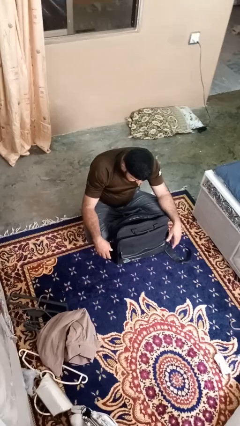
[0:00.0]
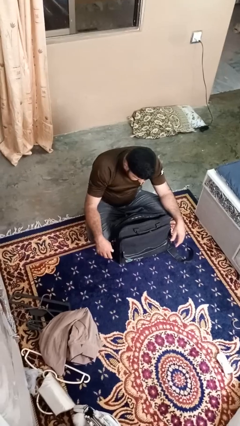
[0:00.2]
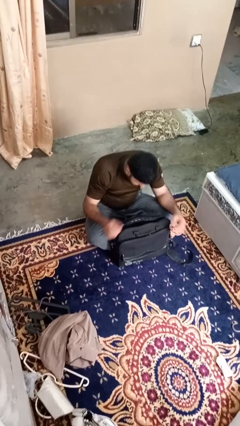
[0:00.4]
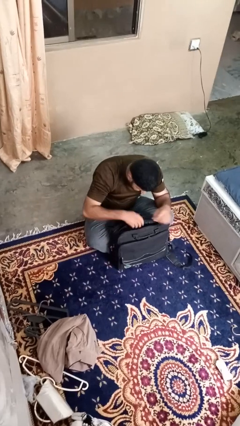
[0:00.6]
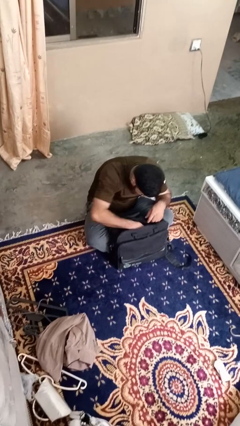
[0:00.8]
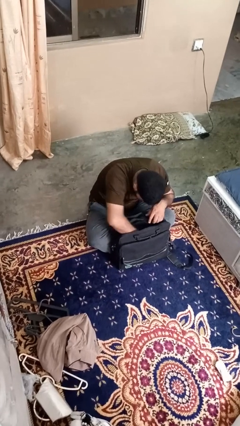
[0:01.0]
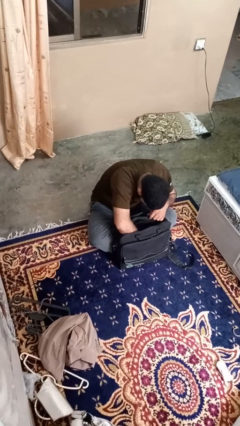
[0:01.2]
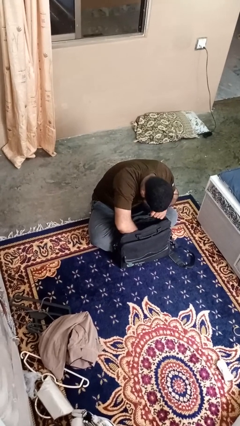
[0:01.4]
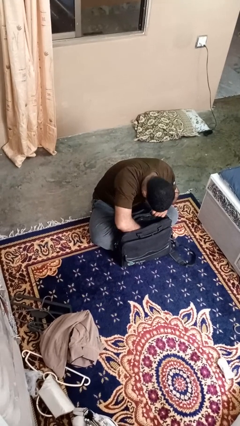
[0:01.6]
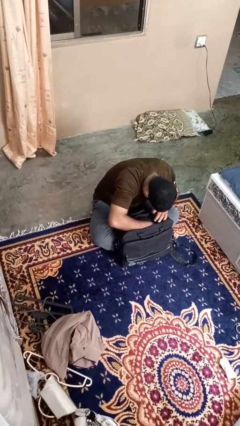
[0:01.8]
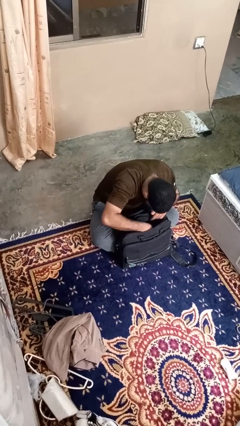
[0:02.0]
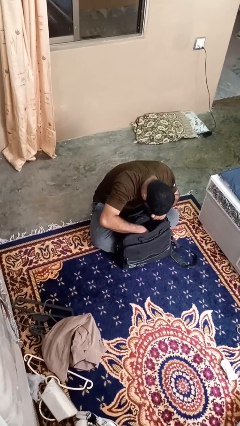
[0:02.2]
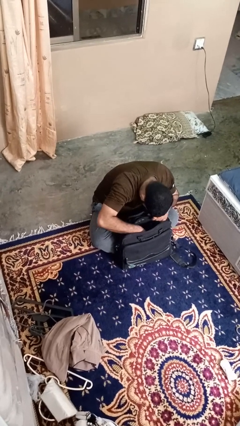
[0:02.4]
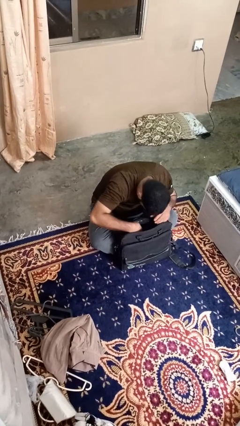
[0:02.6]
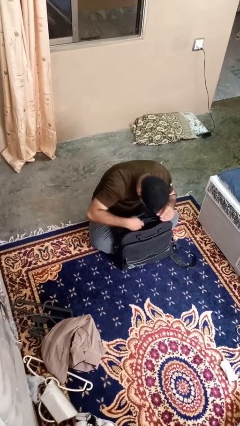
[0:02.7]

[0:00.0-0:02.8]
person searches in bag

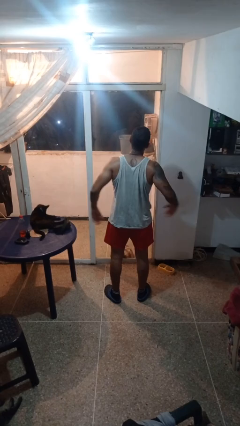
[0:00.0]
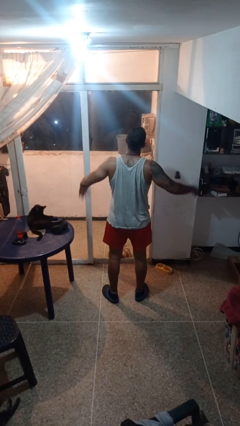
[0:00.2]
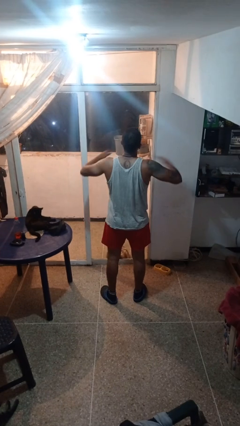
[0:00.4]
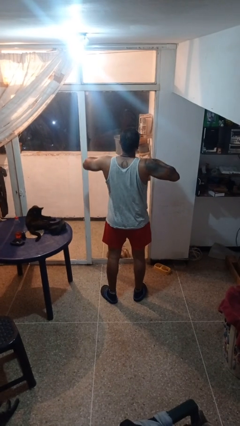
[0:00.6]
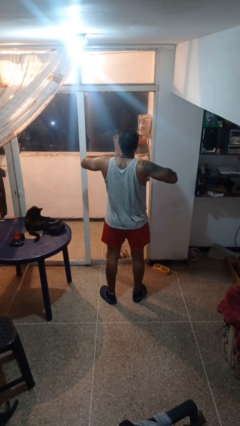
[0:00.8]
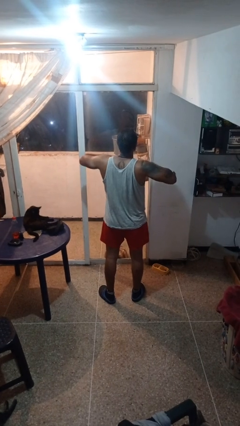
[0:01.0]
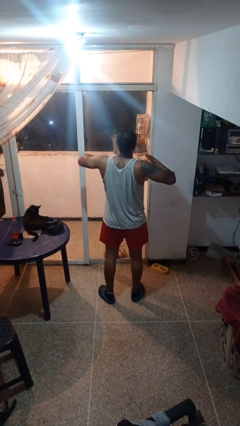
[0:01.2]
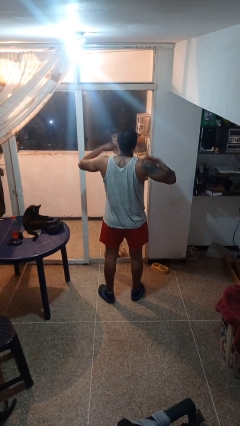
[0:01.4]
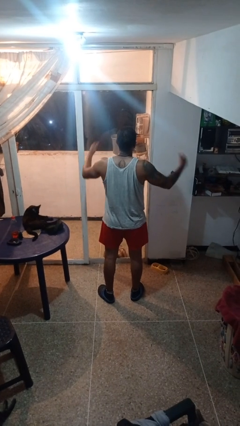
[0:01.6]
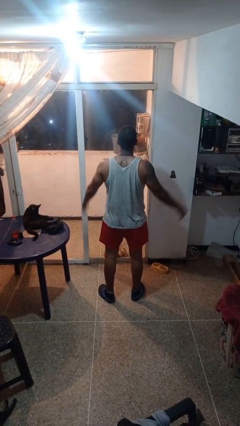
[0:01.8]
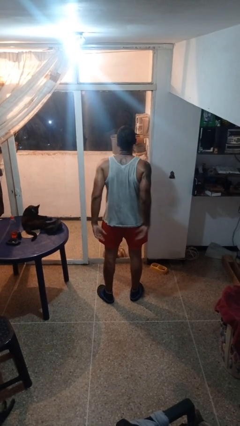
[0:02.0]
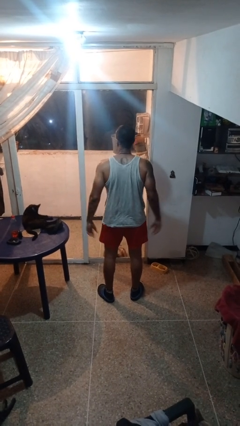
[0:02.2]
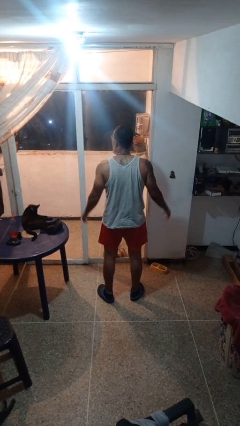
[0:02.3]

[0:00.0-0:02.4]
person drums on chest

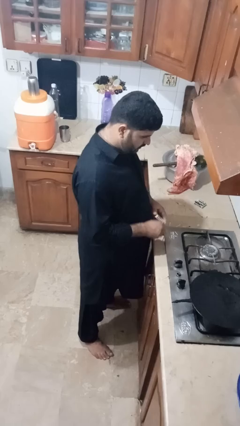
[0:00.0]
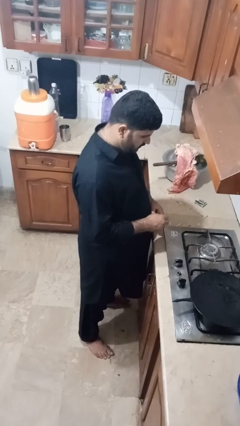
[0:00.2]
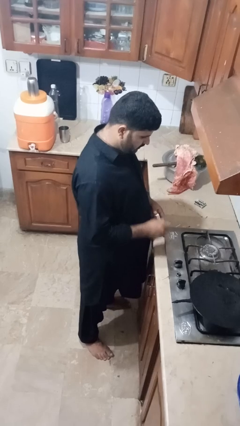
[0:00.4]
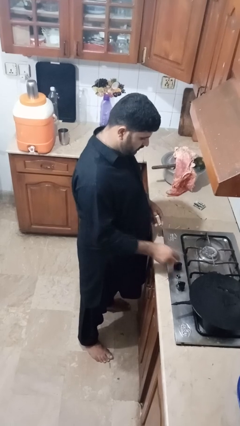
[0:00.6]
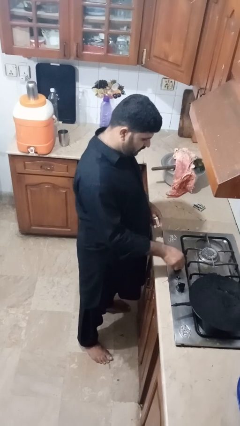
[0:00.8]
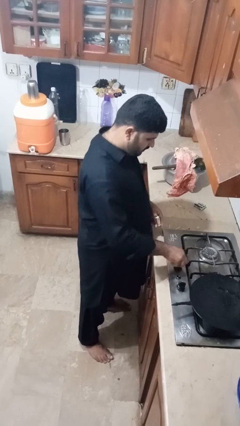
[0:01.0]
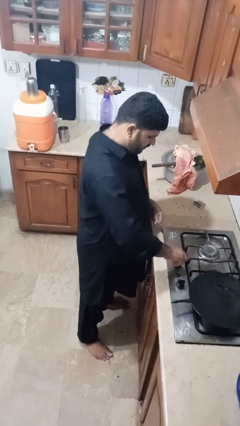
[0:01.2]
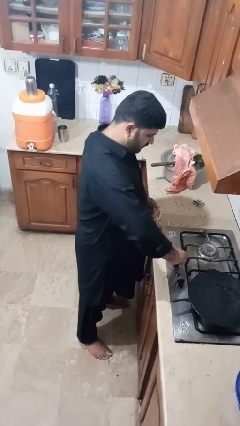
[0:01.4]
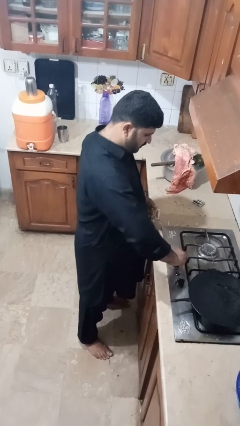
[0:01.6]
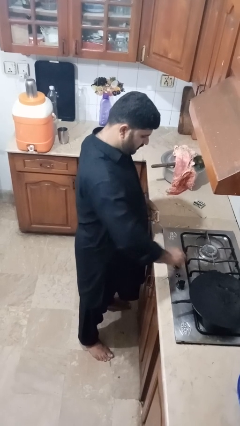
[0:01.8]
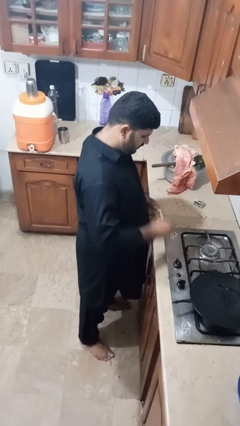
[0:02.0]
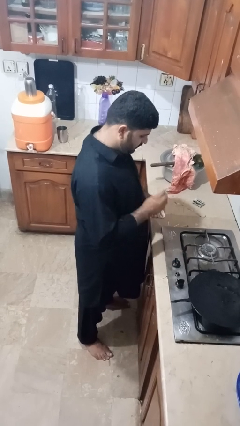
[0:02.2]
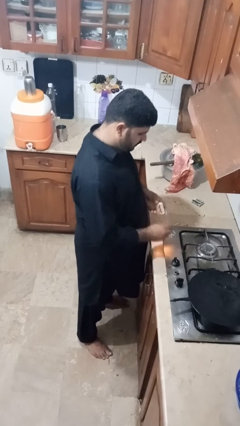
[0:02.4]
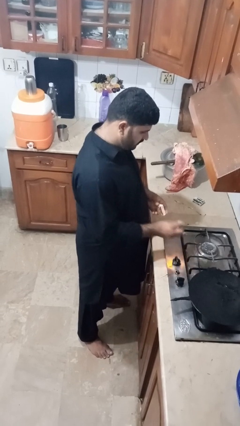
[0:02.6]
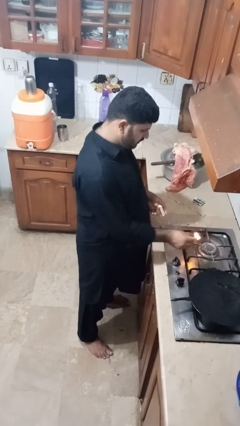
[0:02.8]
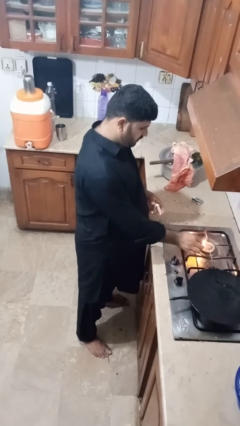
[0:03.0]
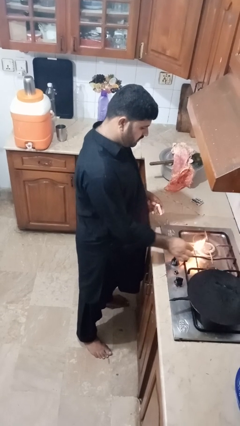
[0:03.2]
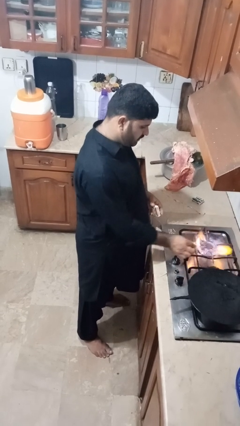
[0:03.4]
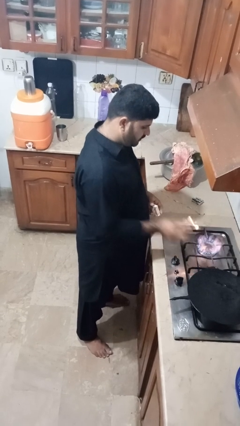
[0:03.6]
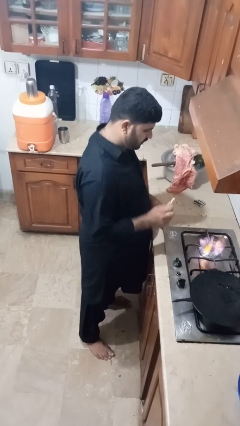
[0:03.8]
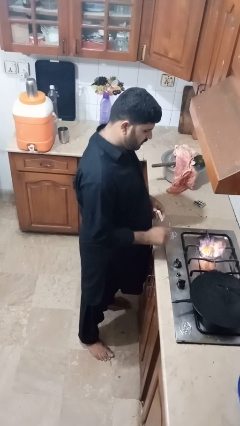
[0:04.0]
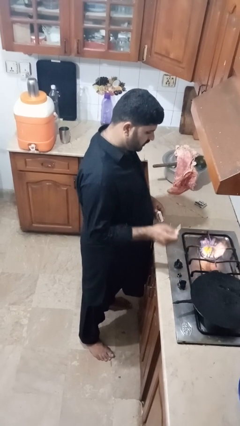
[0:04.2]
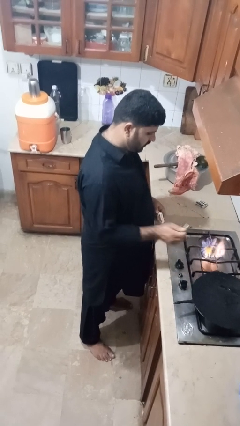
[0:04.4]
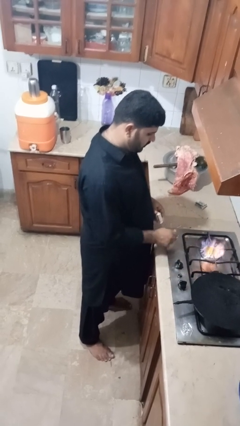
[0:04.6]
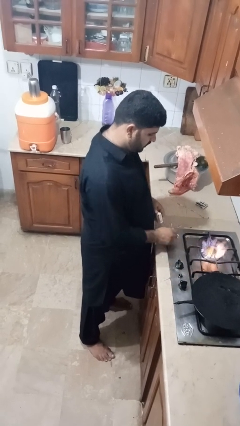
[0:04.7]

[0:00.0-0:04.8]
person turns on stovetop

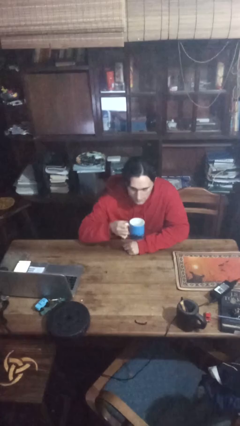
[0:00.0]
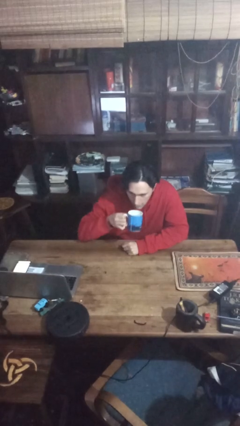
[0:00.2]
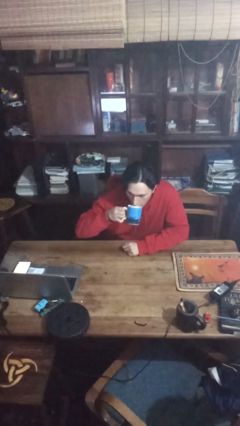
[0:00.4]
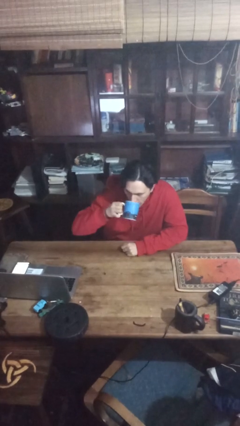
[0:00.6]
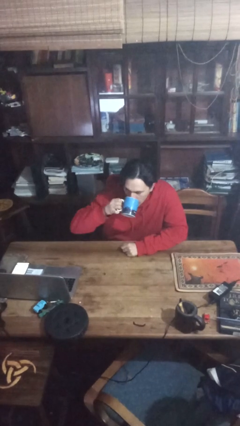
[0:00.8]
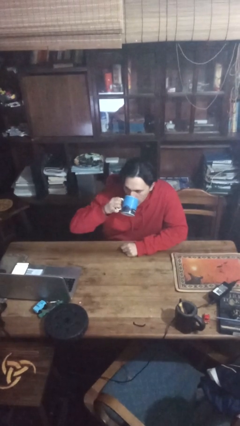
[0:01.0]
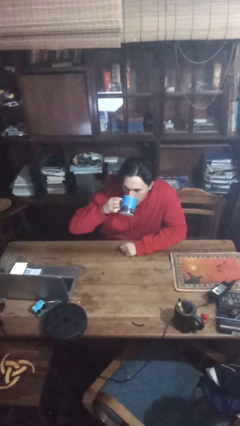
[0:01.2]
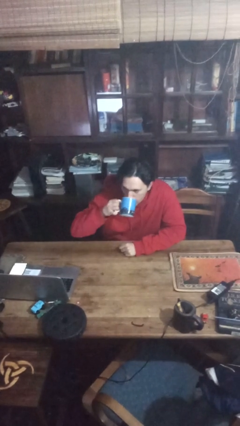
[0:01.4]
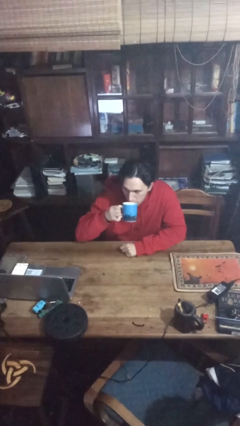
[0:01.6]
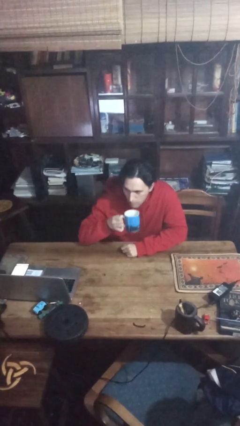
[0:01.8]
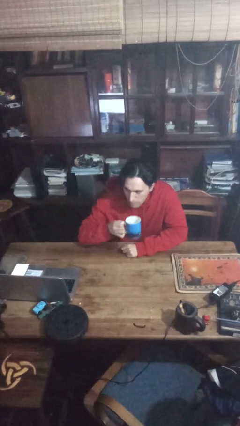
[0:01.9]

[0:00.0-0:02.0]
person drinks from mug

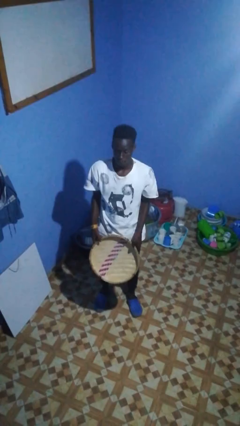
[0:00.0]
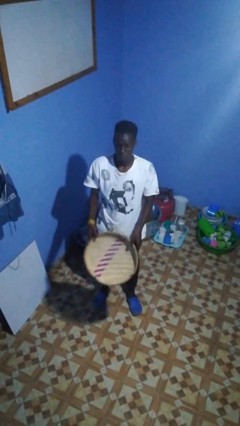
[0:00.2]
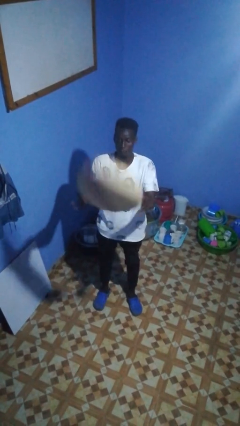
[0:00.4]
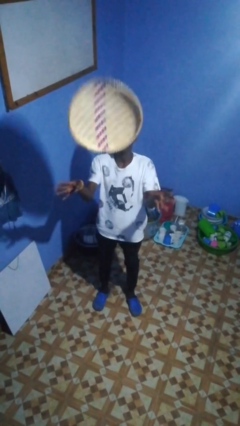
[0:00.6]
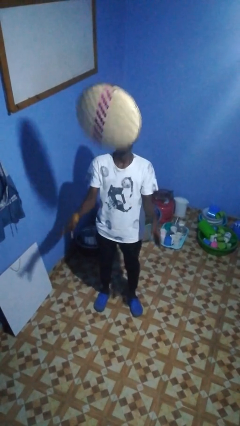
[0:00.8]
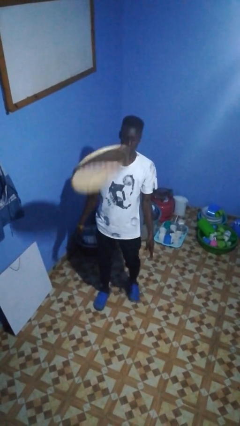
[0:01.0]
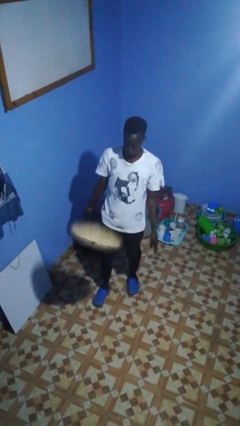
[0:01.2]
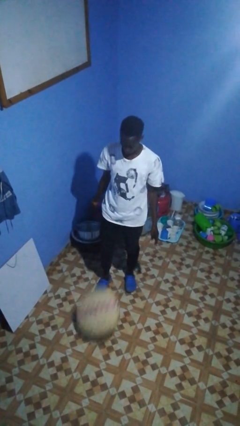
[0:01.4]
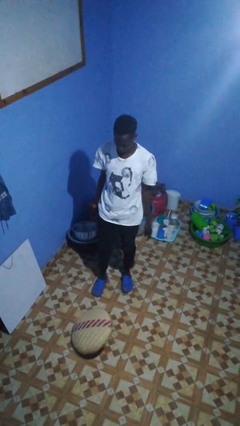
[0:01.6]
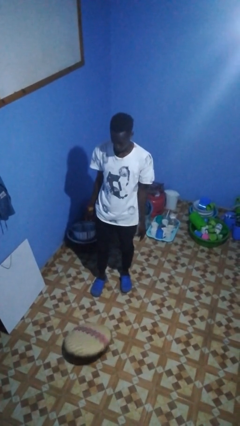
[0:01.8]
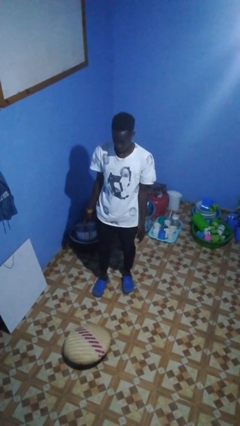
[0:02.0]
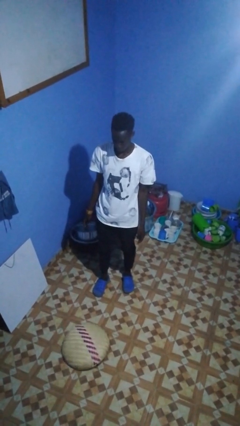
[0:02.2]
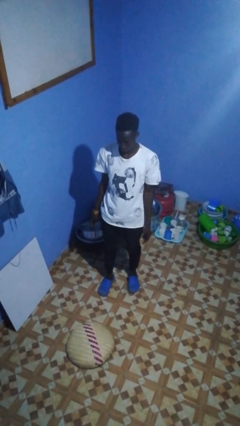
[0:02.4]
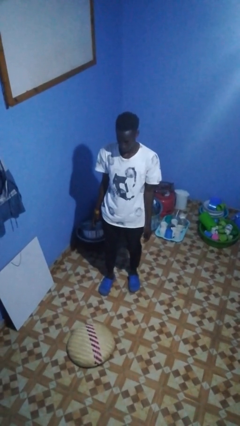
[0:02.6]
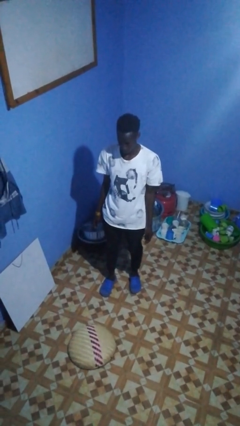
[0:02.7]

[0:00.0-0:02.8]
person throws object into air

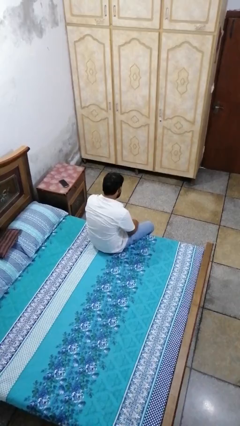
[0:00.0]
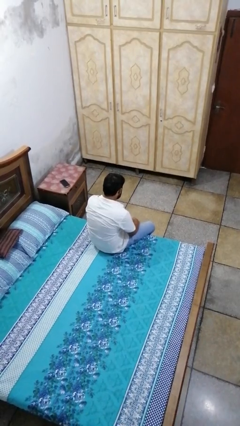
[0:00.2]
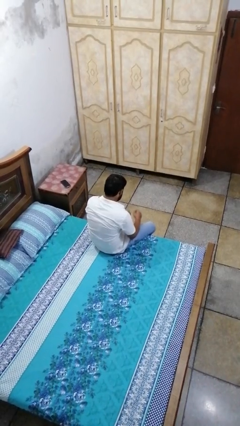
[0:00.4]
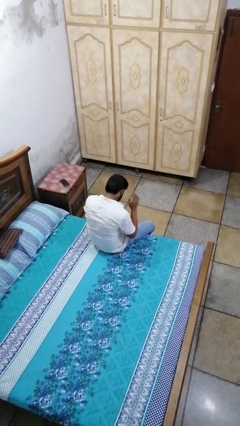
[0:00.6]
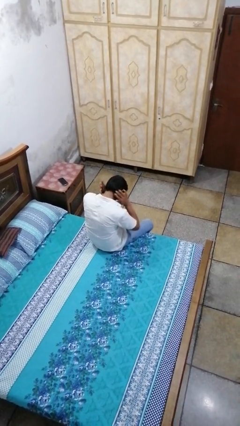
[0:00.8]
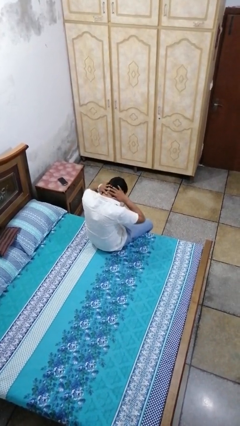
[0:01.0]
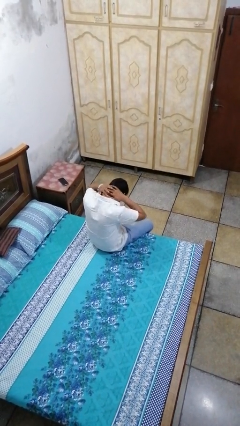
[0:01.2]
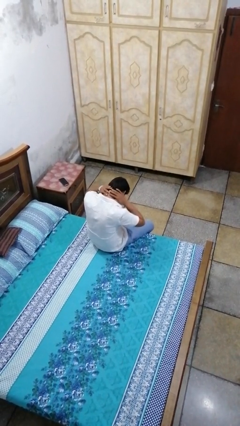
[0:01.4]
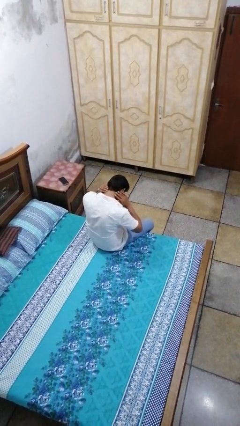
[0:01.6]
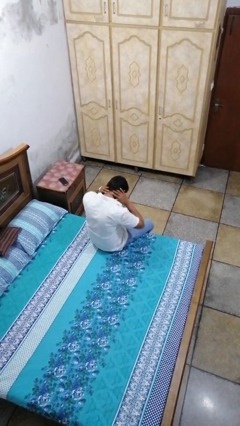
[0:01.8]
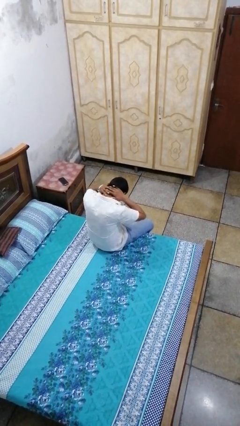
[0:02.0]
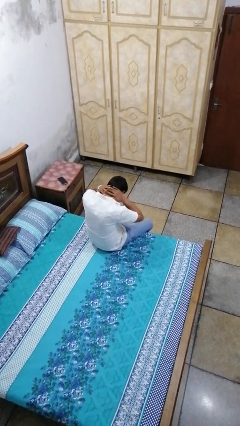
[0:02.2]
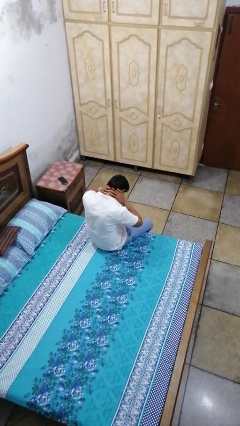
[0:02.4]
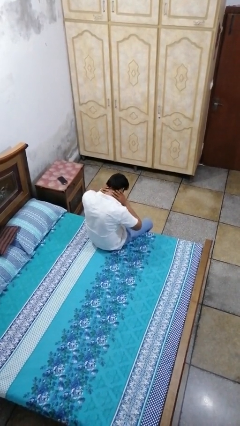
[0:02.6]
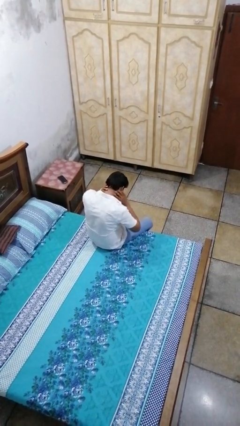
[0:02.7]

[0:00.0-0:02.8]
person rubs neck
